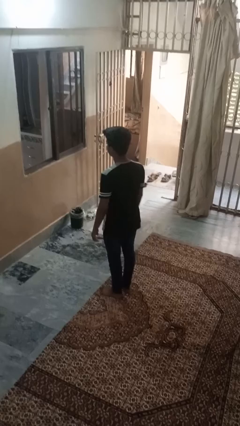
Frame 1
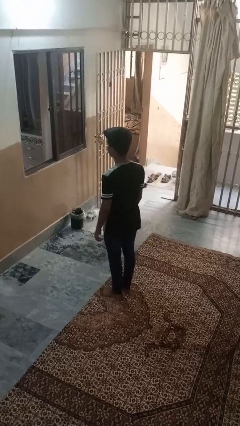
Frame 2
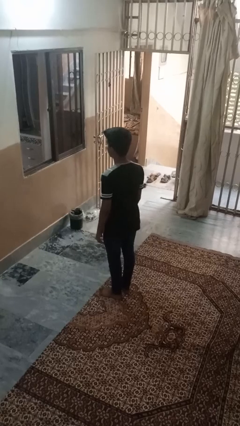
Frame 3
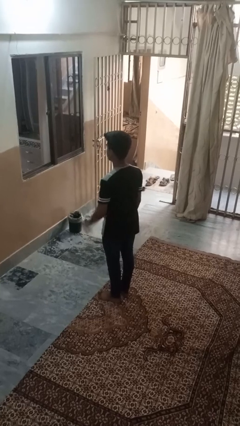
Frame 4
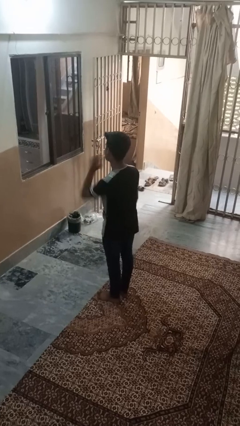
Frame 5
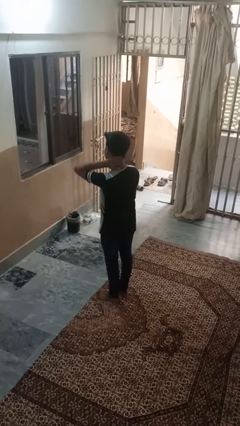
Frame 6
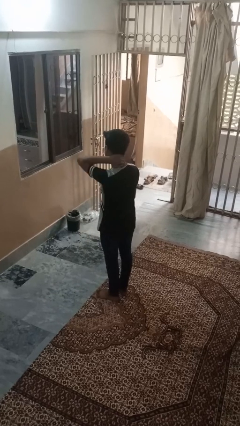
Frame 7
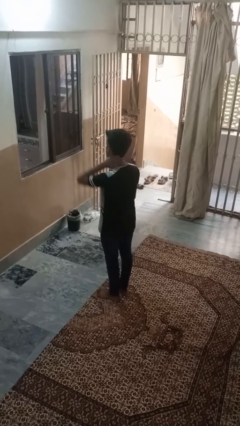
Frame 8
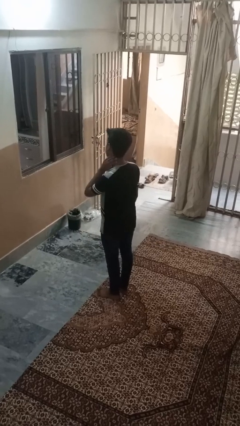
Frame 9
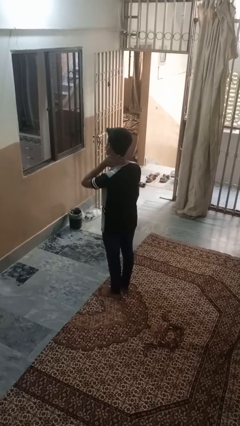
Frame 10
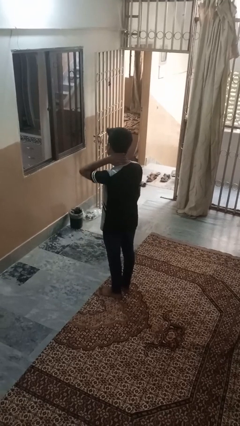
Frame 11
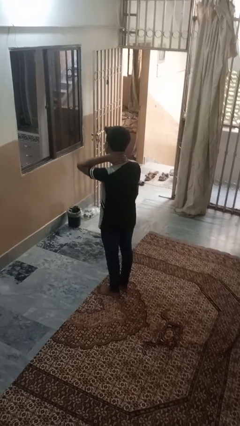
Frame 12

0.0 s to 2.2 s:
person rubs neck

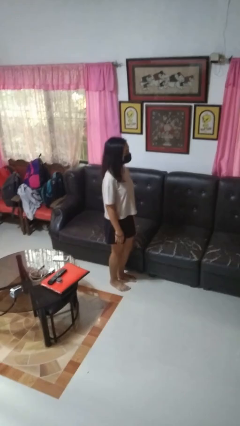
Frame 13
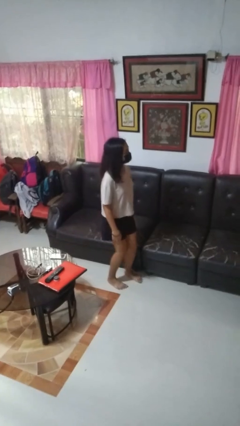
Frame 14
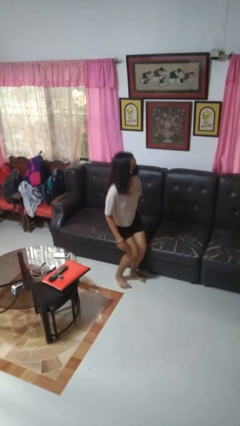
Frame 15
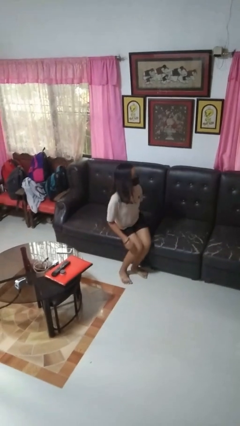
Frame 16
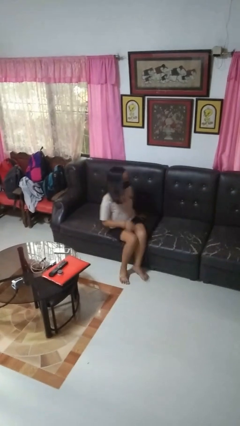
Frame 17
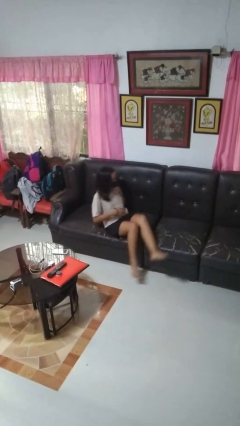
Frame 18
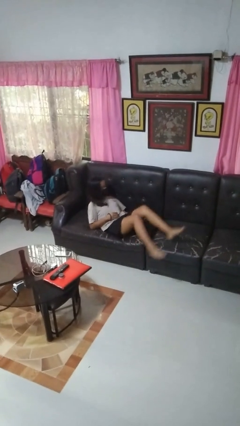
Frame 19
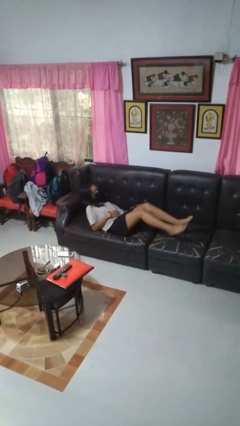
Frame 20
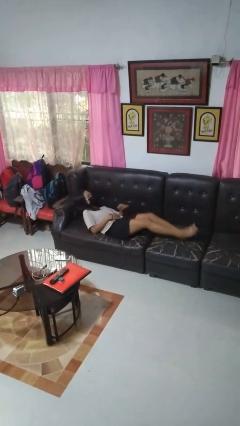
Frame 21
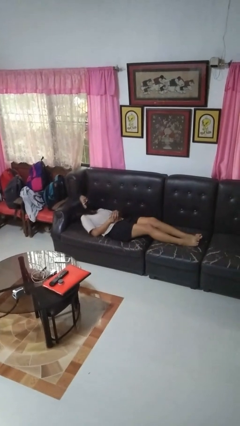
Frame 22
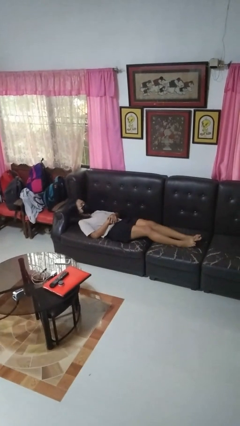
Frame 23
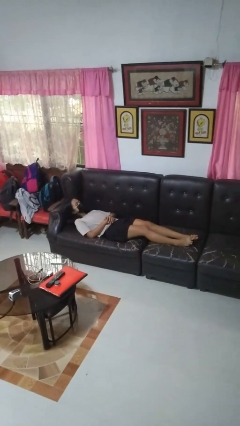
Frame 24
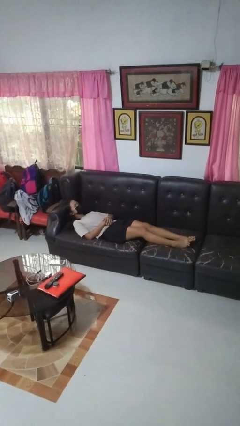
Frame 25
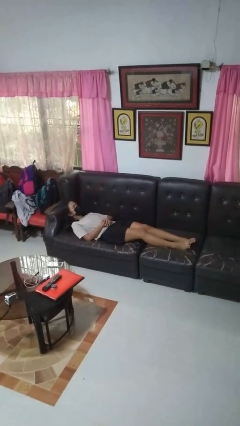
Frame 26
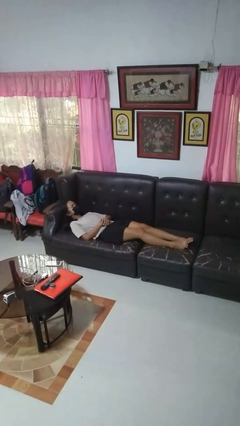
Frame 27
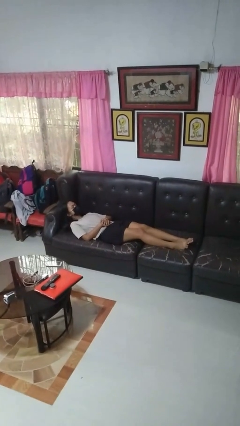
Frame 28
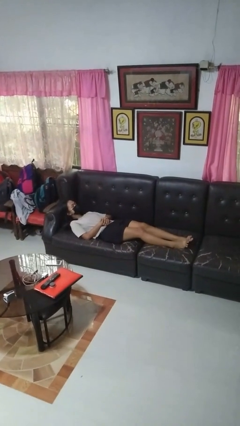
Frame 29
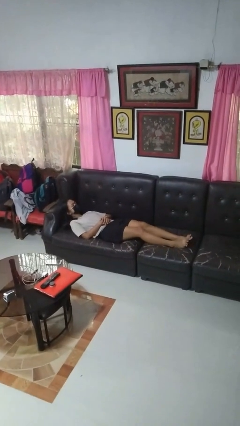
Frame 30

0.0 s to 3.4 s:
person lies down on couch

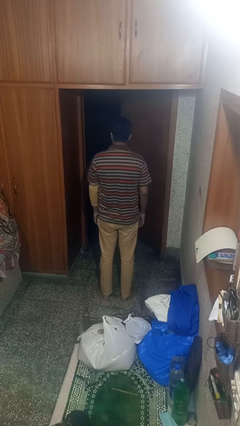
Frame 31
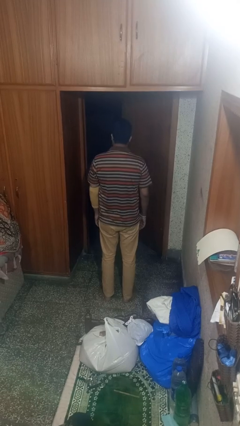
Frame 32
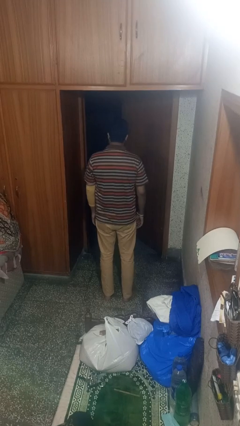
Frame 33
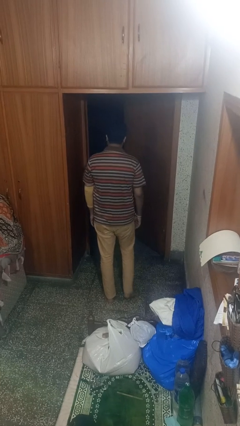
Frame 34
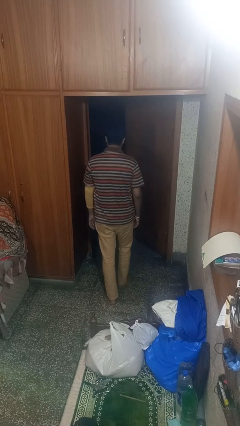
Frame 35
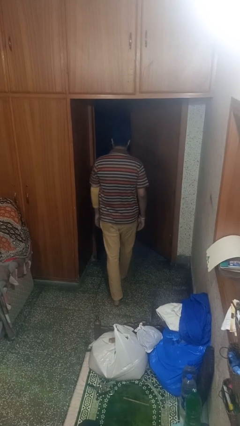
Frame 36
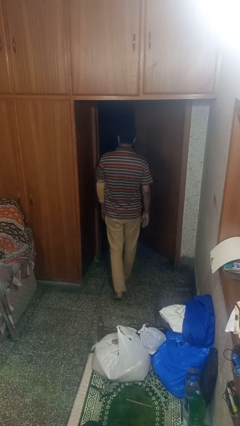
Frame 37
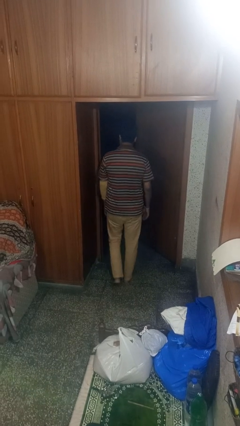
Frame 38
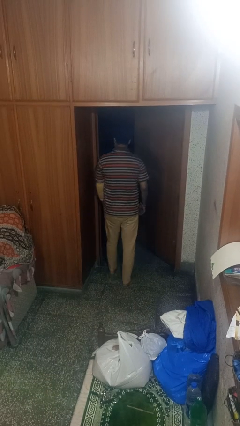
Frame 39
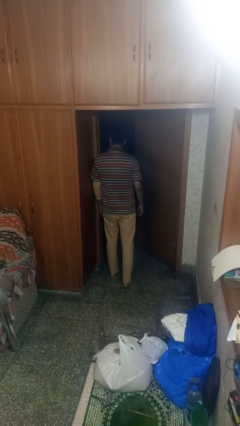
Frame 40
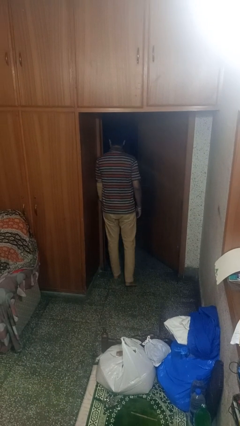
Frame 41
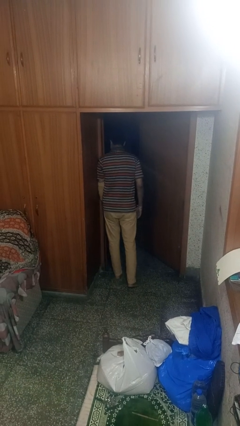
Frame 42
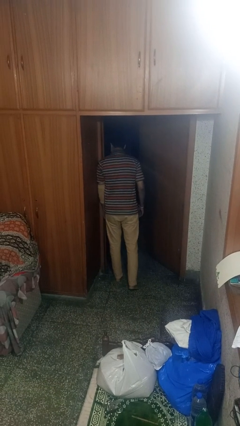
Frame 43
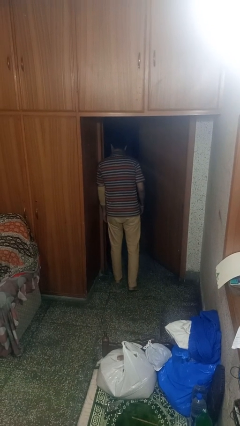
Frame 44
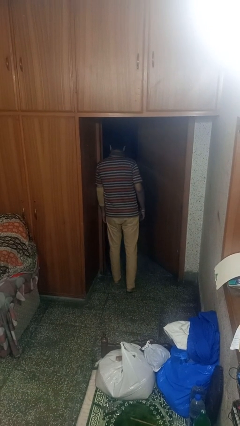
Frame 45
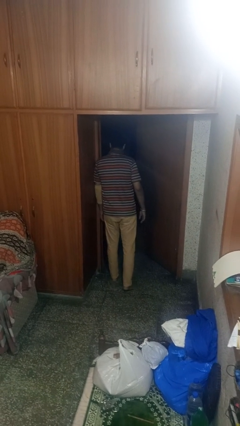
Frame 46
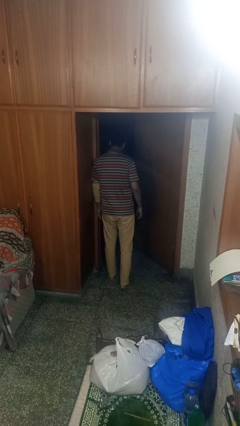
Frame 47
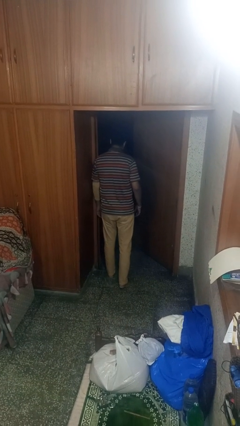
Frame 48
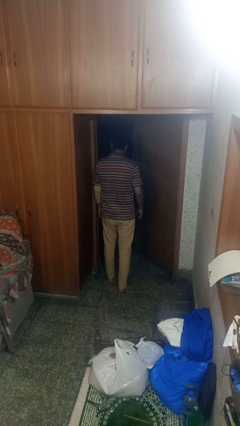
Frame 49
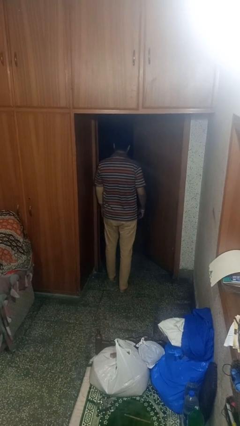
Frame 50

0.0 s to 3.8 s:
person bumps into wall

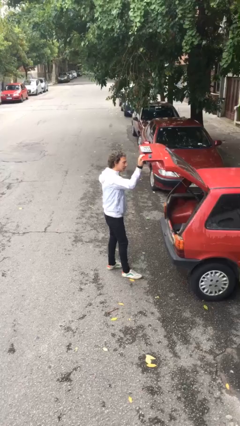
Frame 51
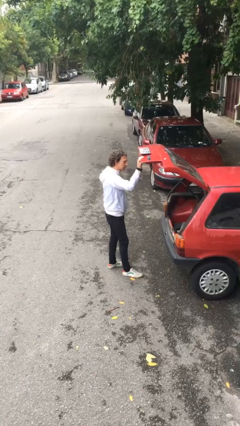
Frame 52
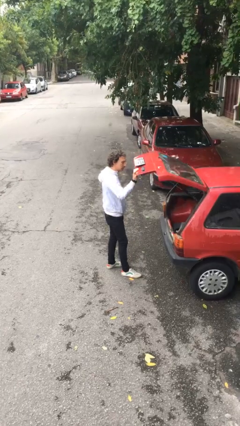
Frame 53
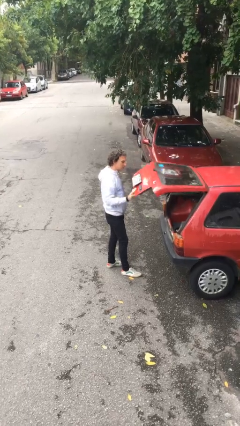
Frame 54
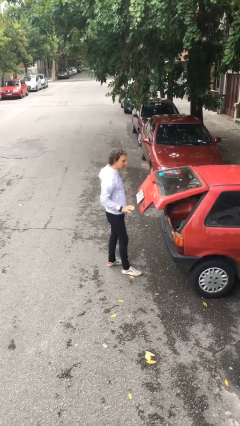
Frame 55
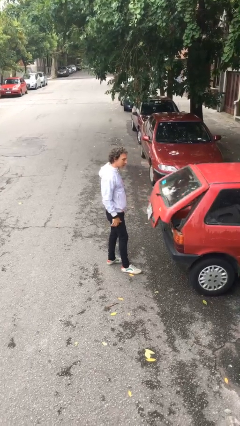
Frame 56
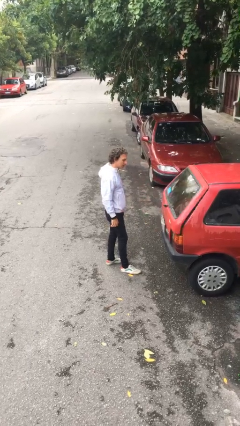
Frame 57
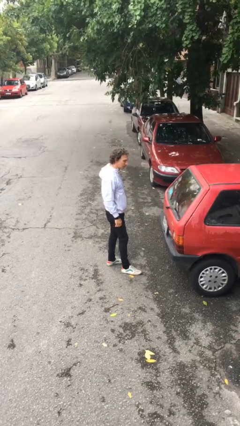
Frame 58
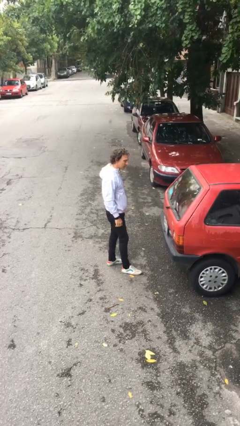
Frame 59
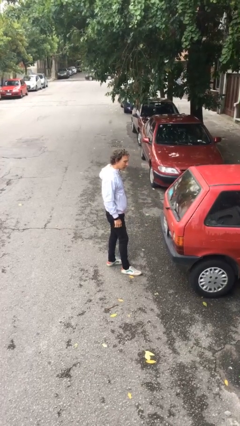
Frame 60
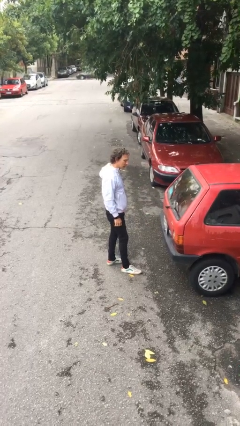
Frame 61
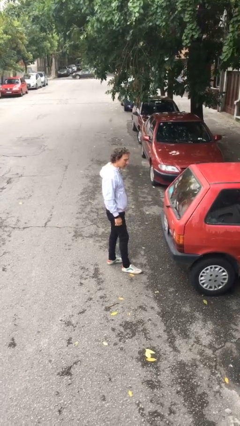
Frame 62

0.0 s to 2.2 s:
person closes car trunk

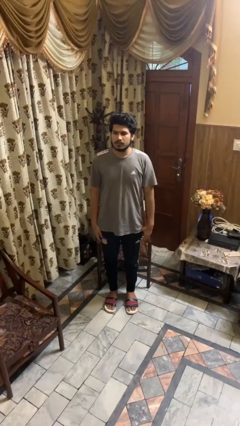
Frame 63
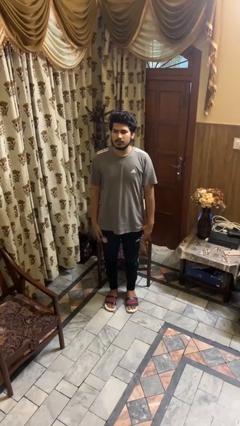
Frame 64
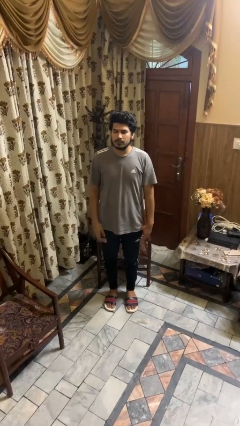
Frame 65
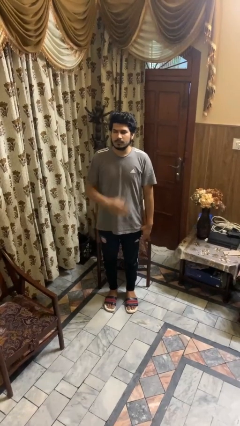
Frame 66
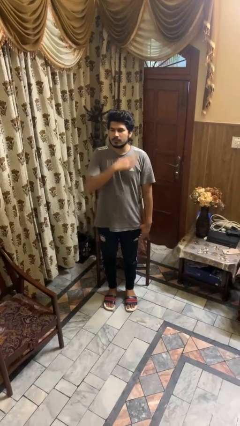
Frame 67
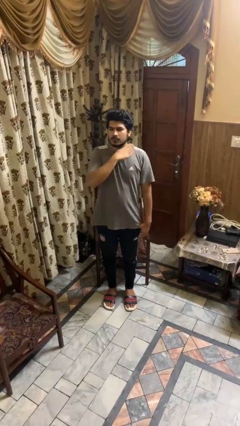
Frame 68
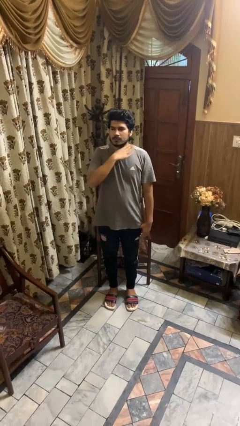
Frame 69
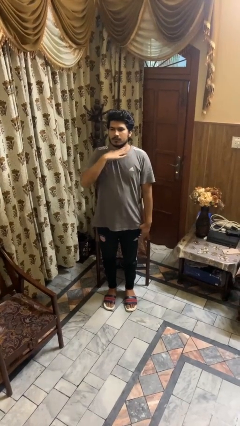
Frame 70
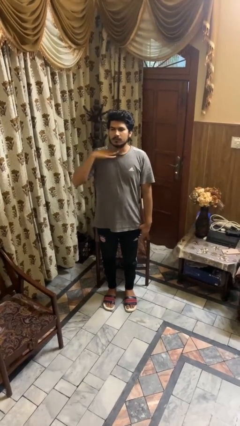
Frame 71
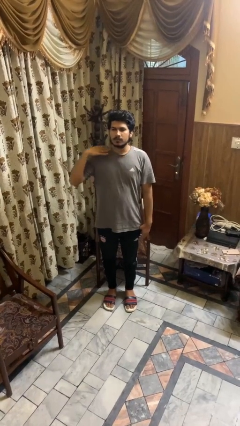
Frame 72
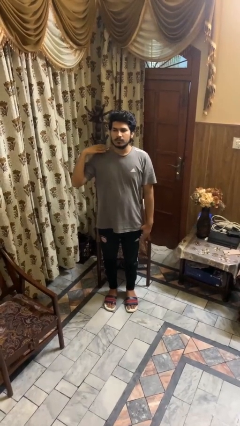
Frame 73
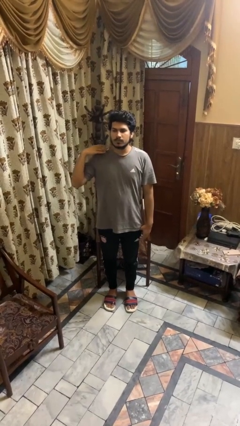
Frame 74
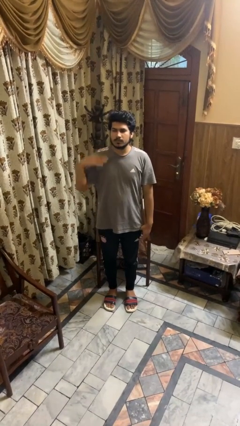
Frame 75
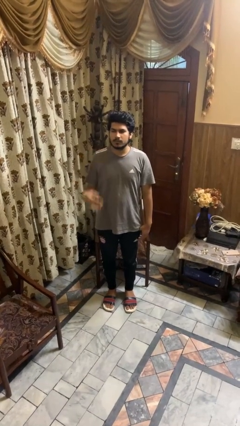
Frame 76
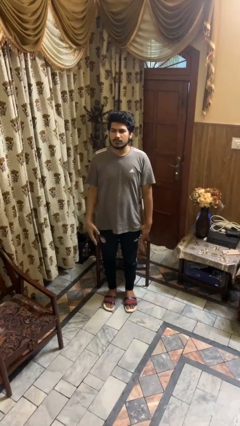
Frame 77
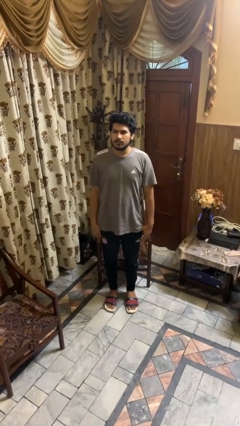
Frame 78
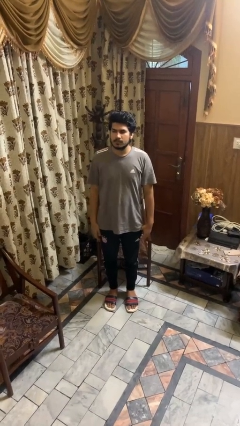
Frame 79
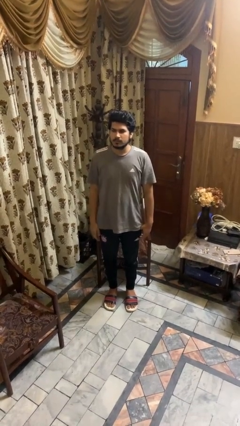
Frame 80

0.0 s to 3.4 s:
person gestures cut

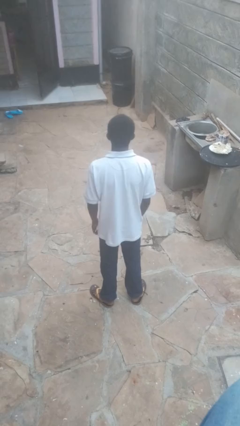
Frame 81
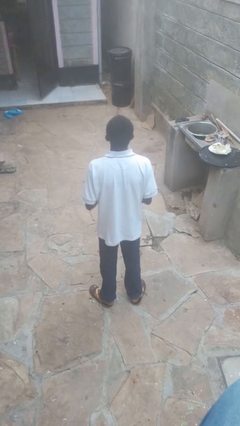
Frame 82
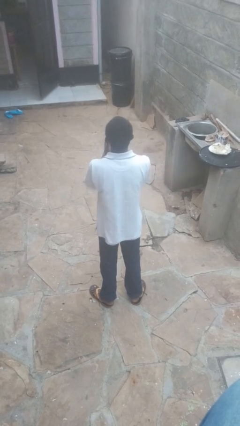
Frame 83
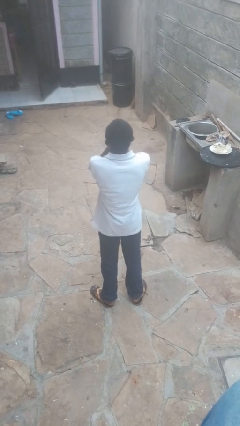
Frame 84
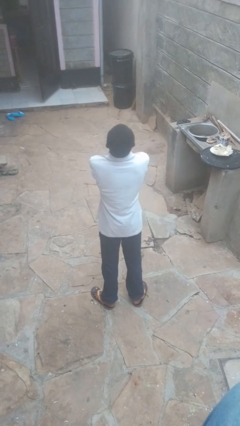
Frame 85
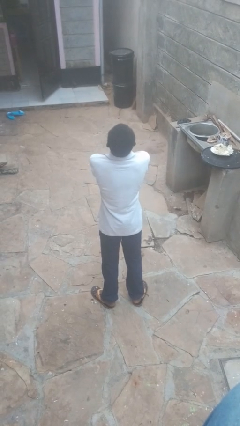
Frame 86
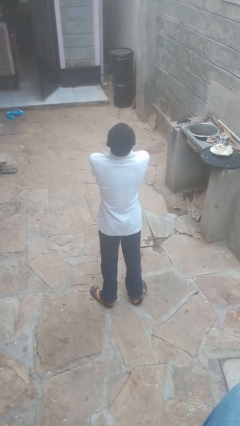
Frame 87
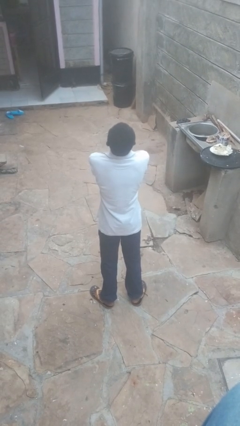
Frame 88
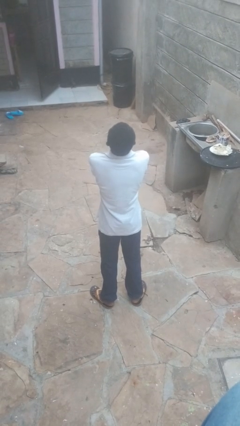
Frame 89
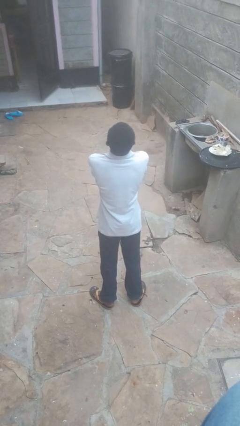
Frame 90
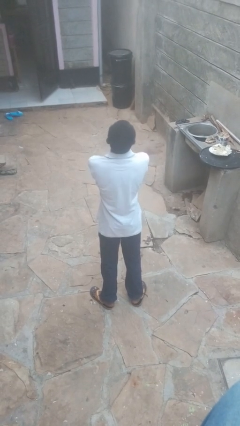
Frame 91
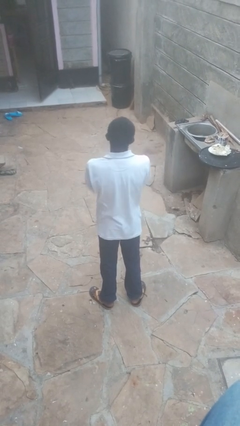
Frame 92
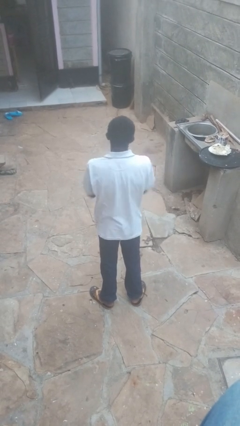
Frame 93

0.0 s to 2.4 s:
person covers face with hands
